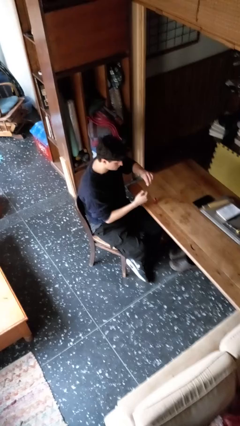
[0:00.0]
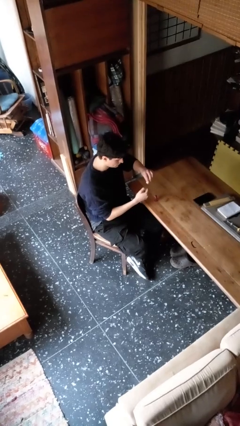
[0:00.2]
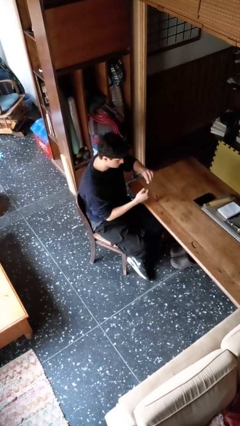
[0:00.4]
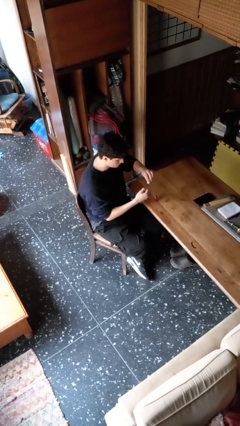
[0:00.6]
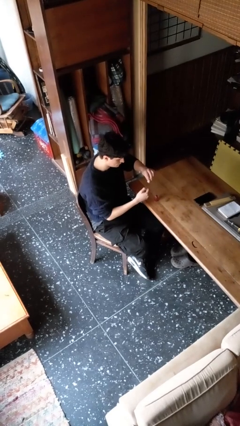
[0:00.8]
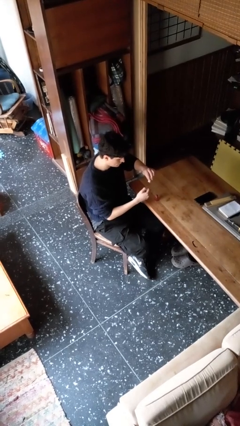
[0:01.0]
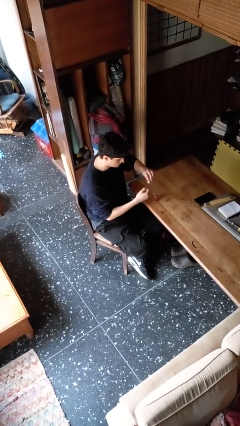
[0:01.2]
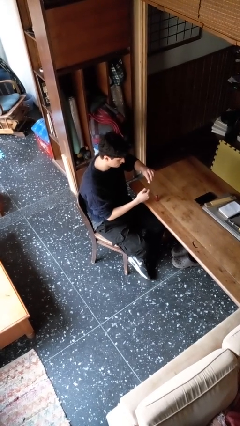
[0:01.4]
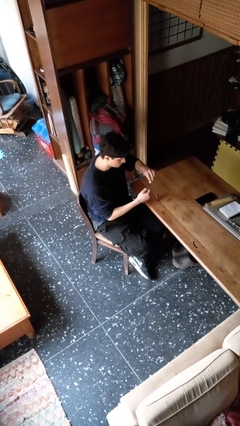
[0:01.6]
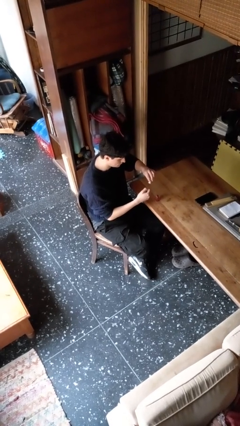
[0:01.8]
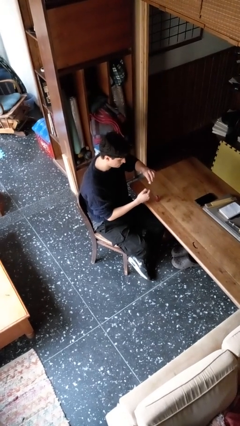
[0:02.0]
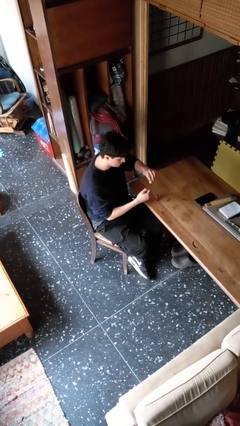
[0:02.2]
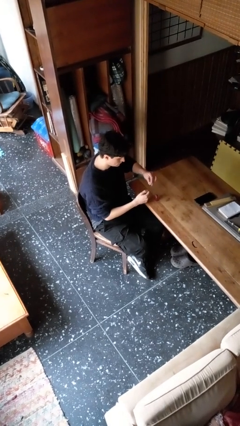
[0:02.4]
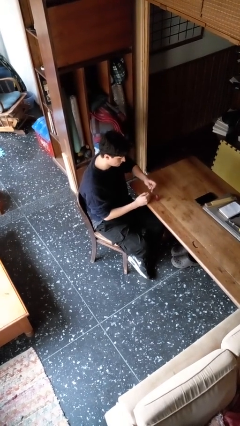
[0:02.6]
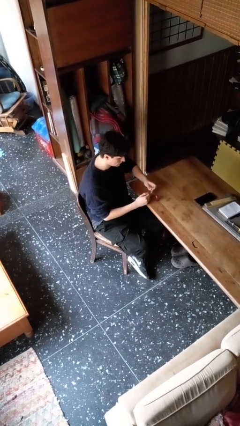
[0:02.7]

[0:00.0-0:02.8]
person paints fingernails

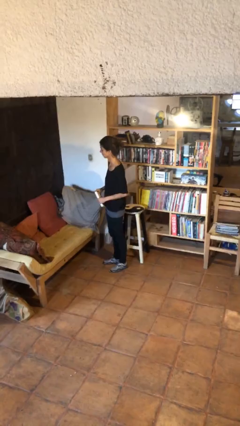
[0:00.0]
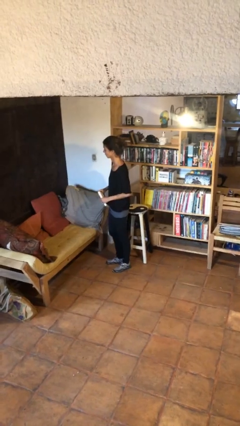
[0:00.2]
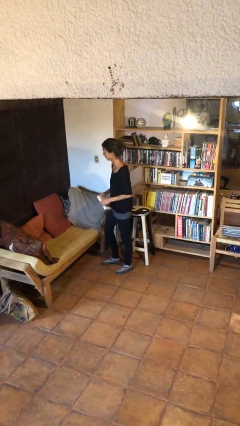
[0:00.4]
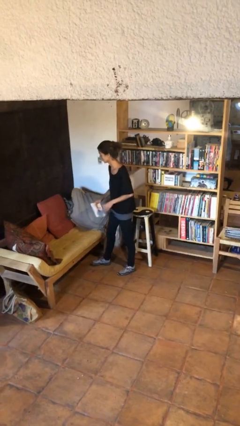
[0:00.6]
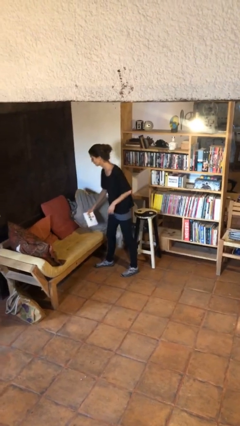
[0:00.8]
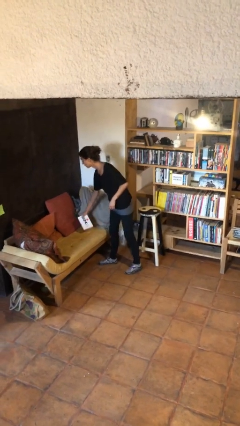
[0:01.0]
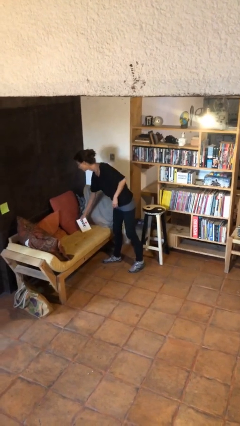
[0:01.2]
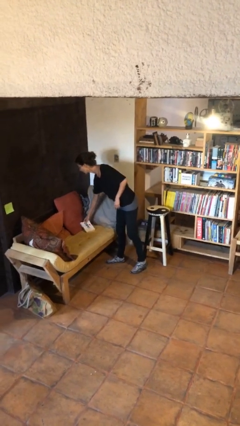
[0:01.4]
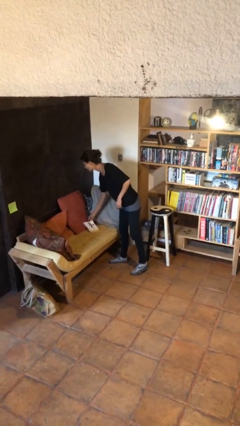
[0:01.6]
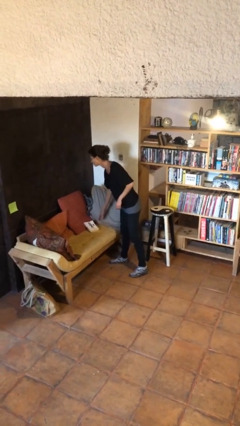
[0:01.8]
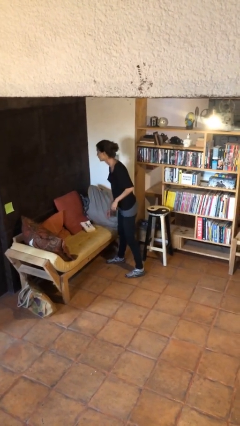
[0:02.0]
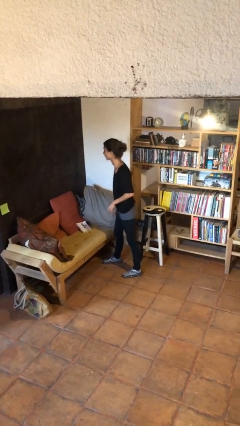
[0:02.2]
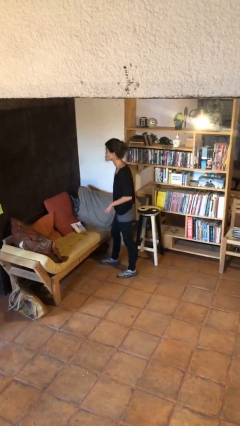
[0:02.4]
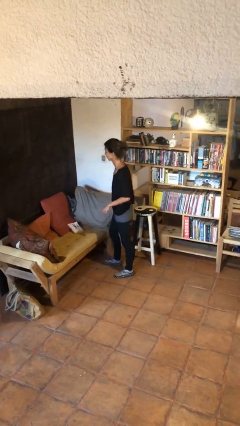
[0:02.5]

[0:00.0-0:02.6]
person puts down object on couch

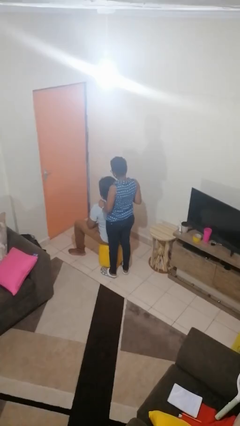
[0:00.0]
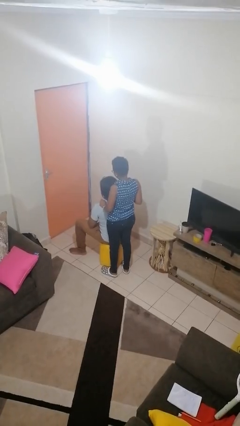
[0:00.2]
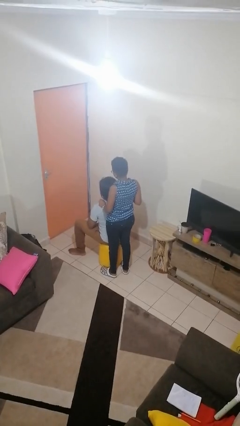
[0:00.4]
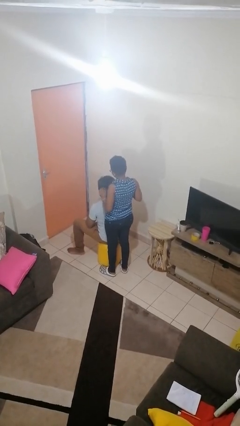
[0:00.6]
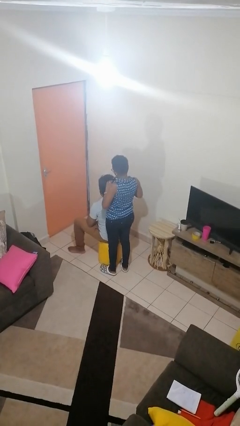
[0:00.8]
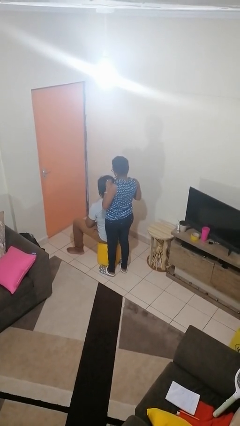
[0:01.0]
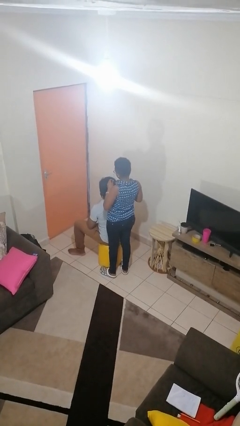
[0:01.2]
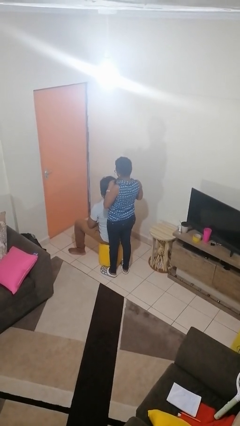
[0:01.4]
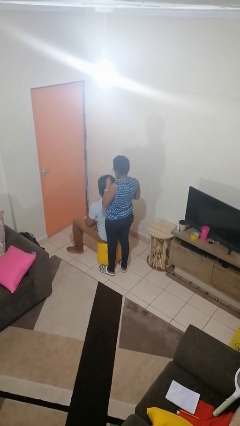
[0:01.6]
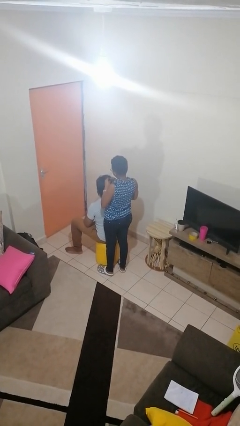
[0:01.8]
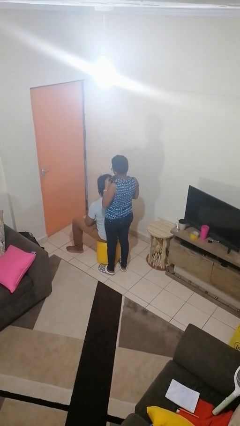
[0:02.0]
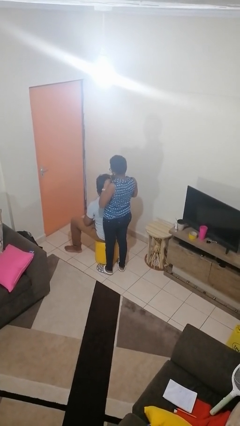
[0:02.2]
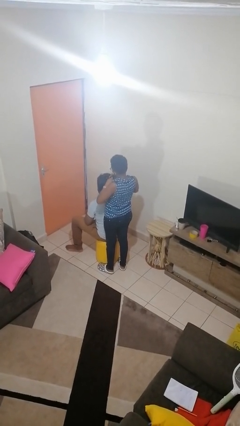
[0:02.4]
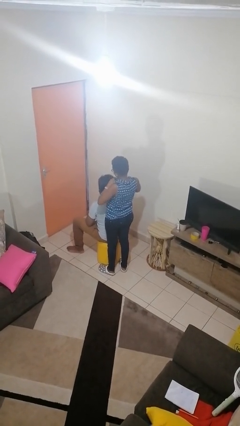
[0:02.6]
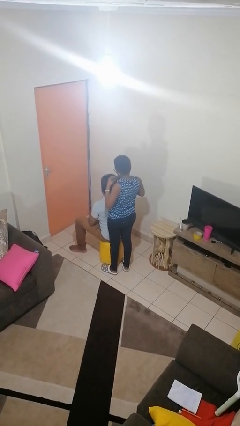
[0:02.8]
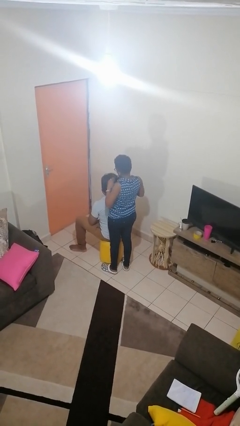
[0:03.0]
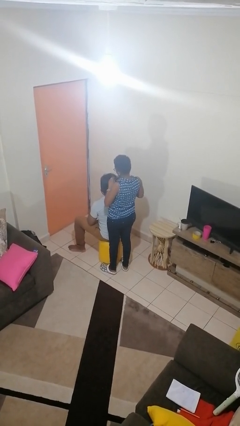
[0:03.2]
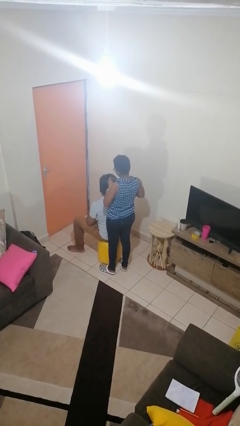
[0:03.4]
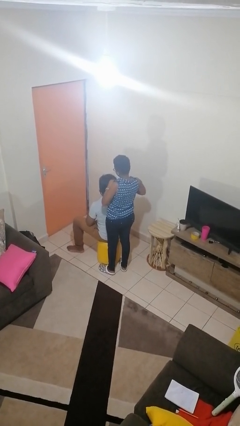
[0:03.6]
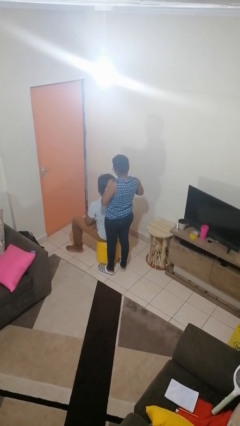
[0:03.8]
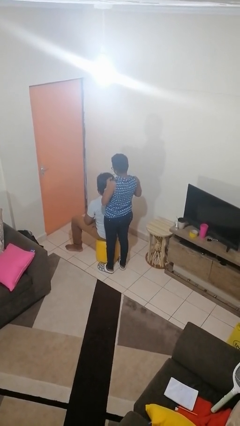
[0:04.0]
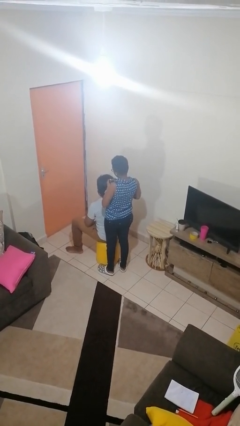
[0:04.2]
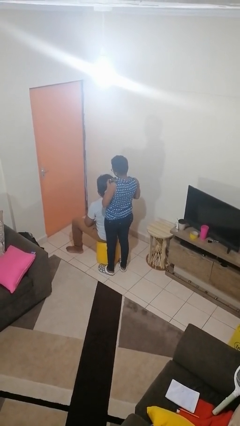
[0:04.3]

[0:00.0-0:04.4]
person braids hair of person

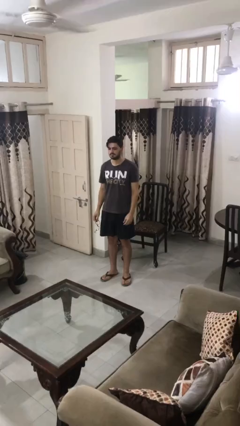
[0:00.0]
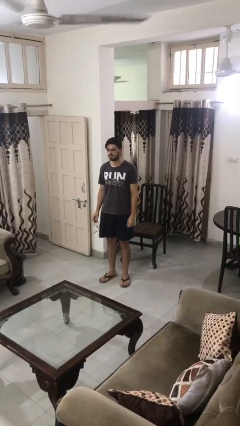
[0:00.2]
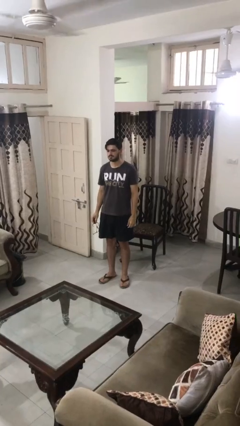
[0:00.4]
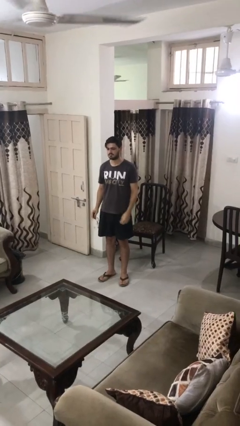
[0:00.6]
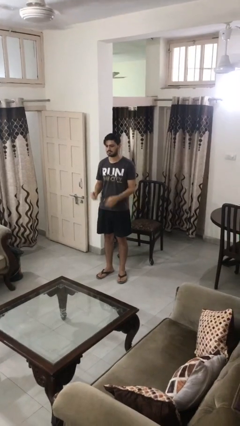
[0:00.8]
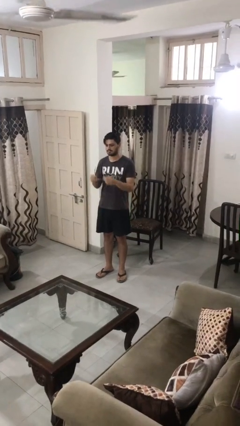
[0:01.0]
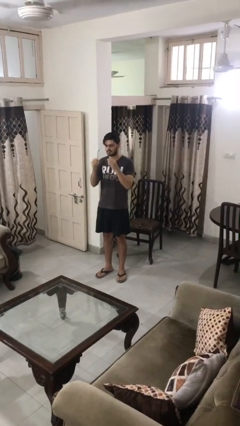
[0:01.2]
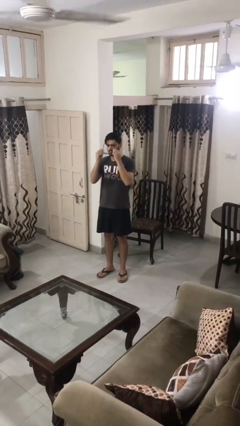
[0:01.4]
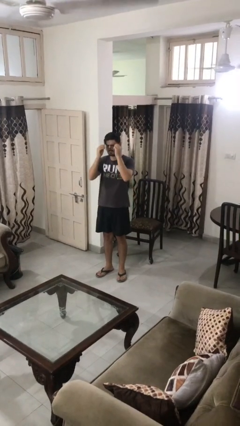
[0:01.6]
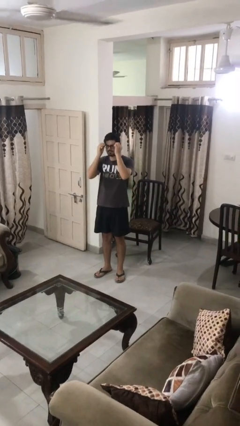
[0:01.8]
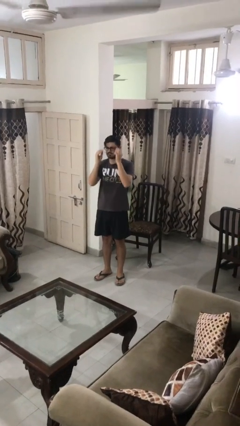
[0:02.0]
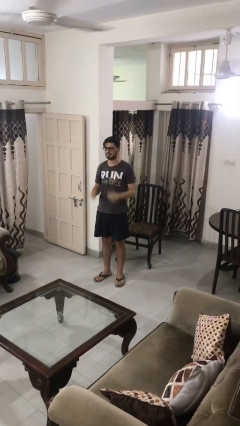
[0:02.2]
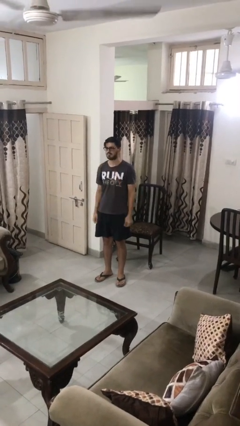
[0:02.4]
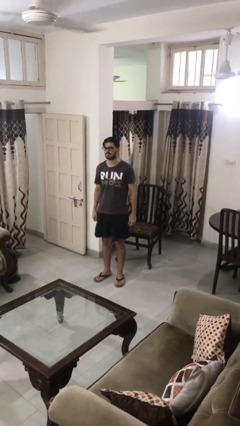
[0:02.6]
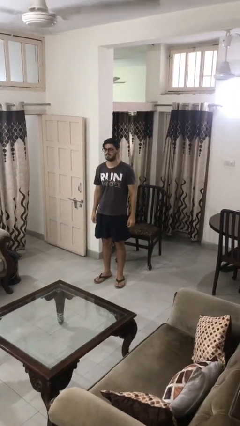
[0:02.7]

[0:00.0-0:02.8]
person puts on glasses

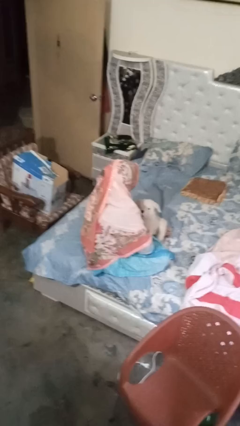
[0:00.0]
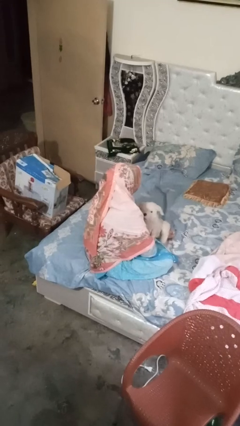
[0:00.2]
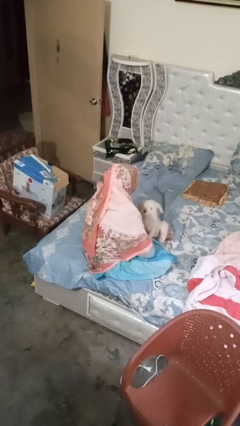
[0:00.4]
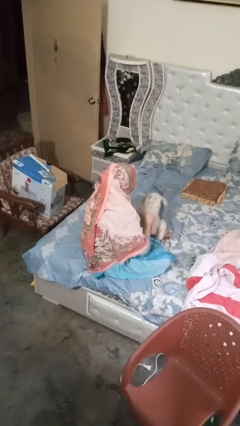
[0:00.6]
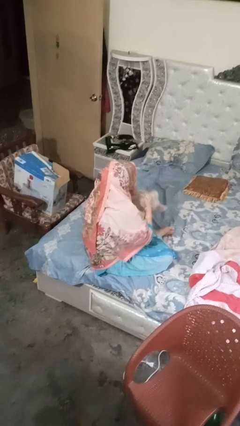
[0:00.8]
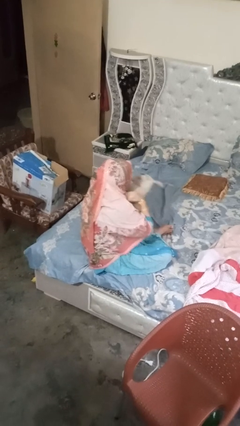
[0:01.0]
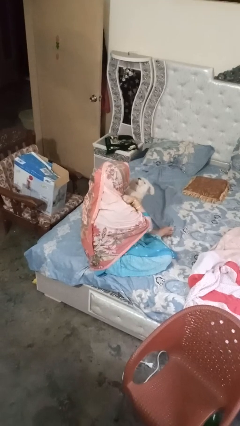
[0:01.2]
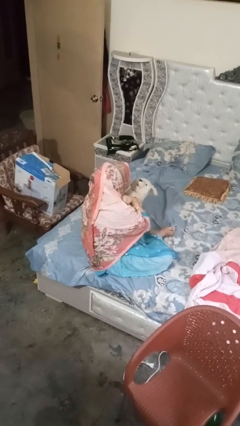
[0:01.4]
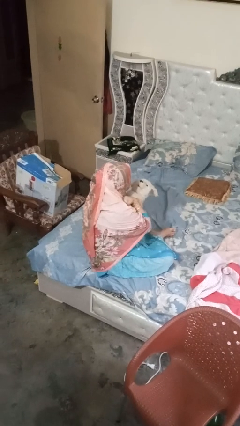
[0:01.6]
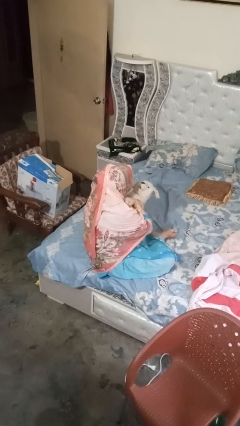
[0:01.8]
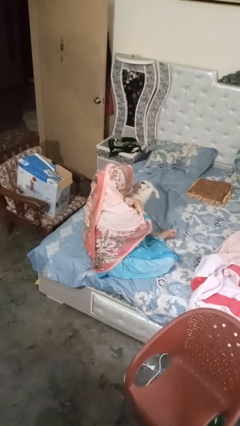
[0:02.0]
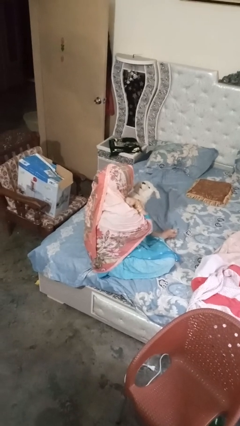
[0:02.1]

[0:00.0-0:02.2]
person hugs stuffed animal

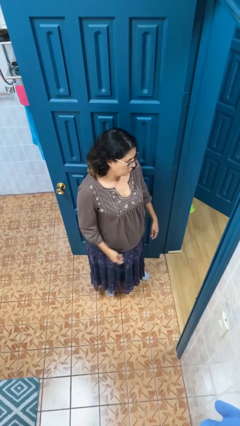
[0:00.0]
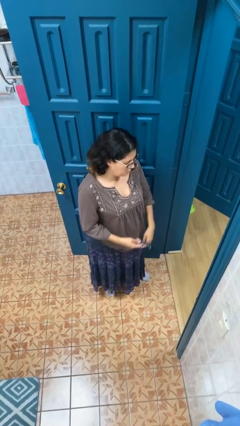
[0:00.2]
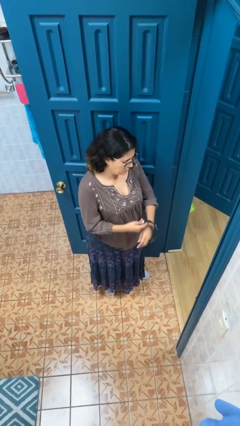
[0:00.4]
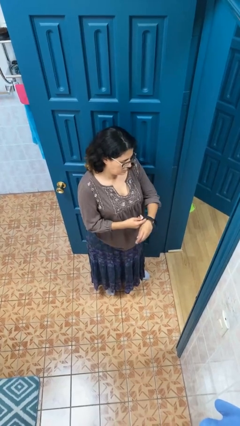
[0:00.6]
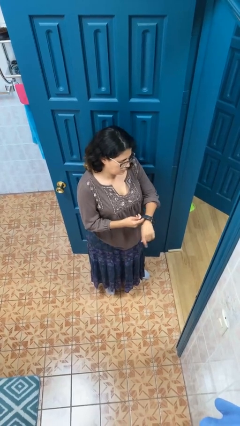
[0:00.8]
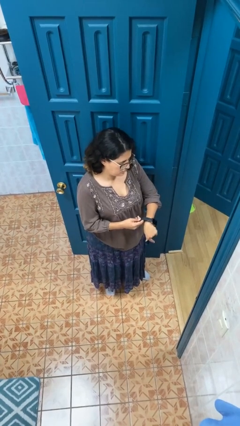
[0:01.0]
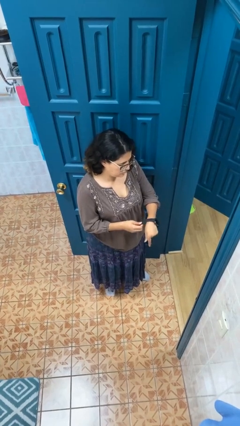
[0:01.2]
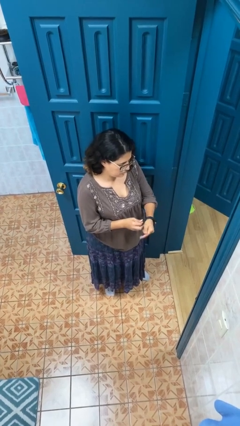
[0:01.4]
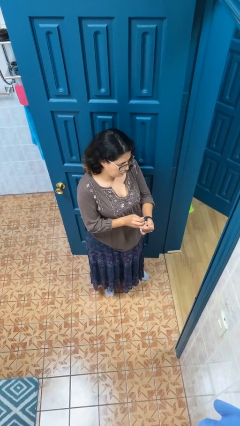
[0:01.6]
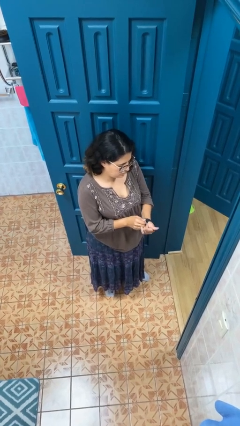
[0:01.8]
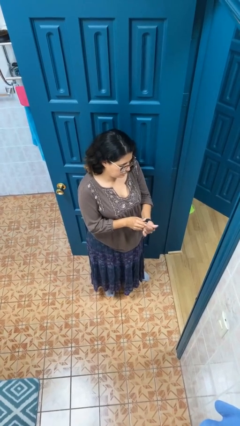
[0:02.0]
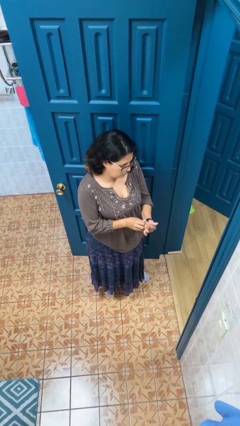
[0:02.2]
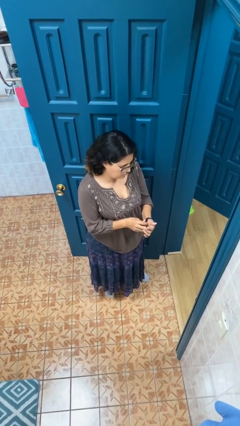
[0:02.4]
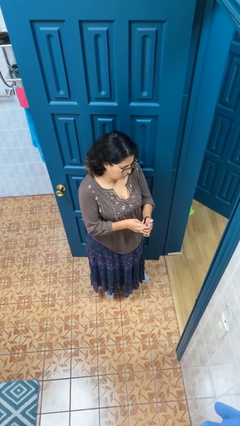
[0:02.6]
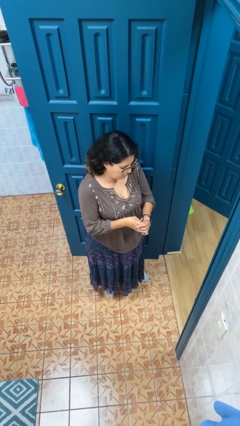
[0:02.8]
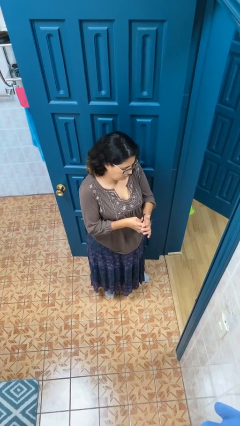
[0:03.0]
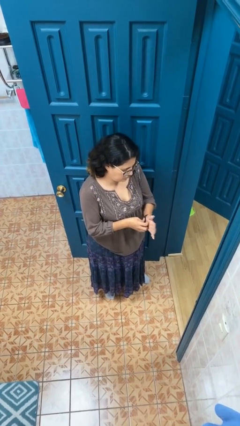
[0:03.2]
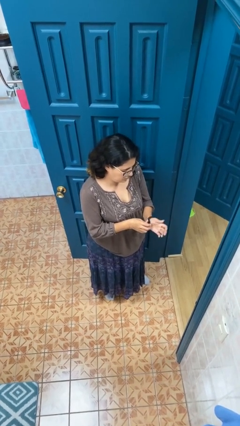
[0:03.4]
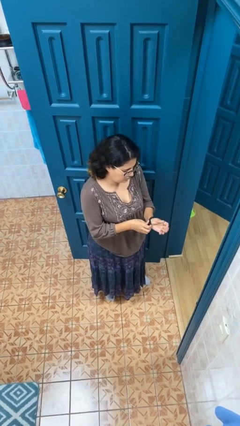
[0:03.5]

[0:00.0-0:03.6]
person puts on wristwatch
